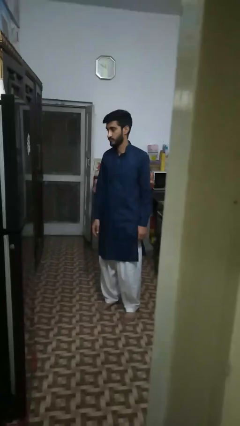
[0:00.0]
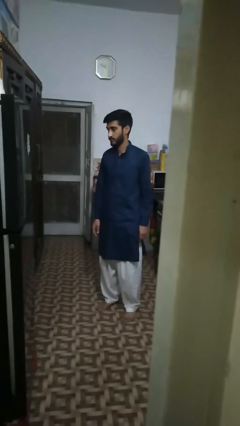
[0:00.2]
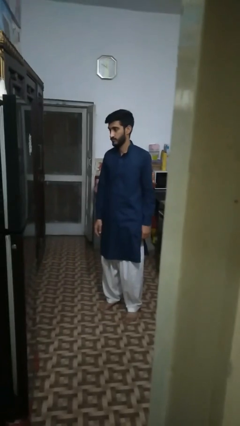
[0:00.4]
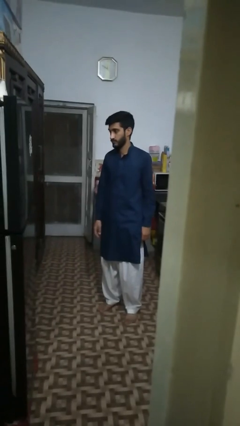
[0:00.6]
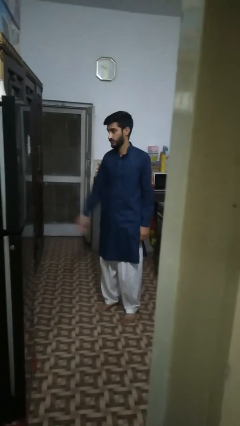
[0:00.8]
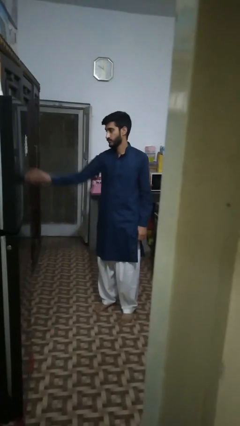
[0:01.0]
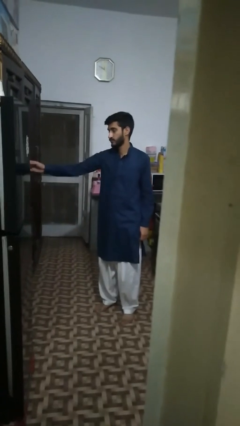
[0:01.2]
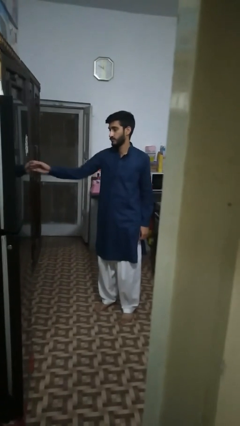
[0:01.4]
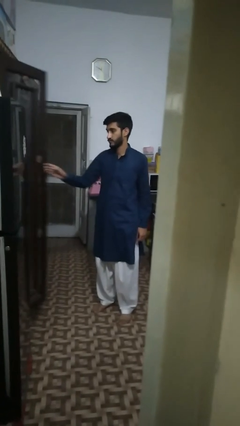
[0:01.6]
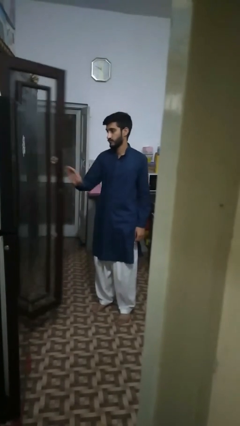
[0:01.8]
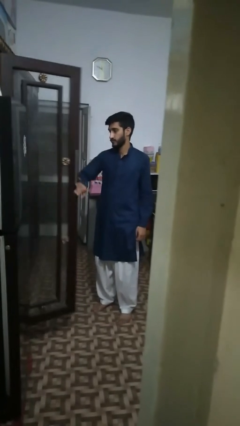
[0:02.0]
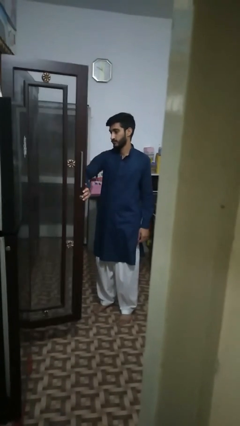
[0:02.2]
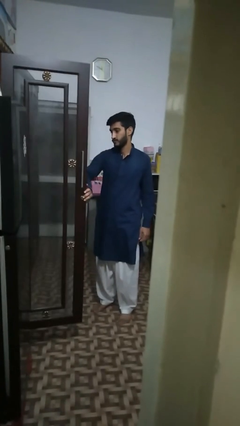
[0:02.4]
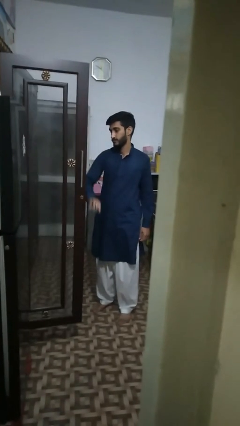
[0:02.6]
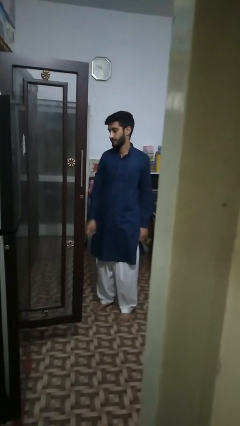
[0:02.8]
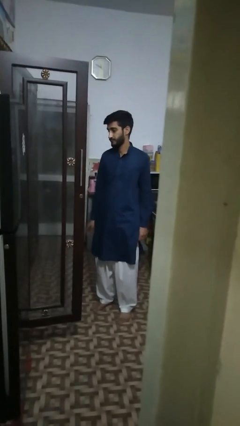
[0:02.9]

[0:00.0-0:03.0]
person opens cabinet

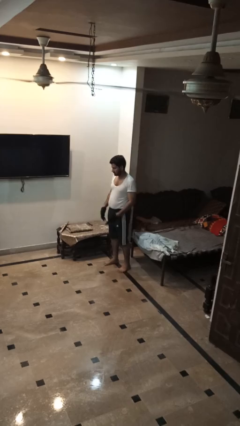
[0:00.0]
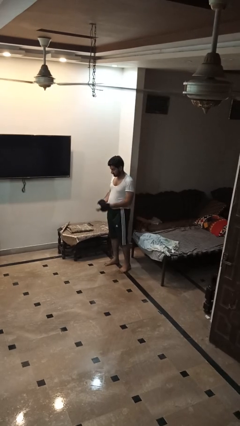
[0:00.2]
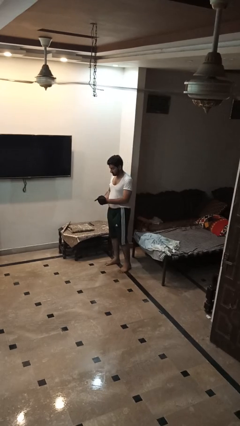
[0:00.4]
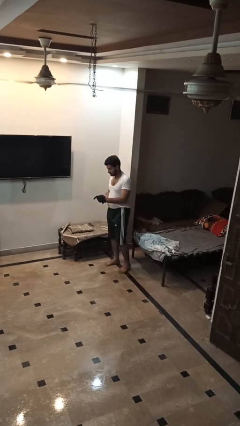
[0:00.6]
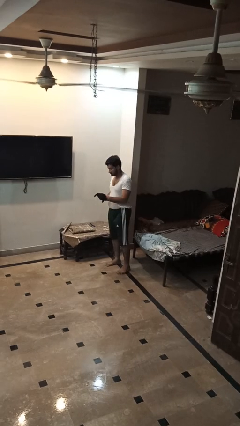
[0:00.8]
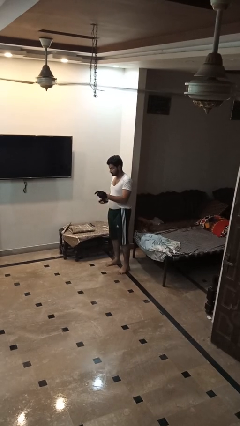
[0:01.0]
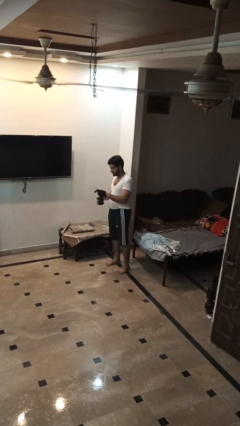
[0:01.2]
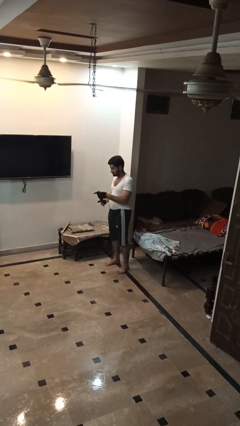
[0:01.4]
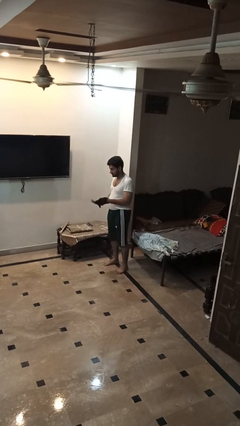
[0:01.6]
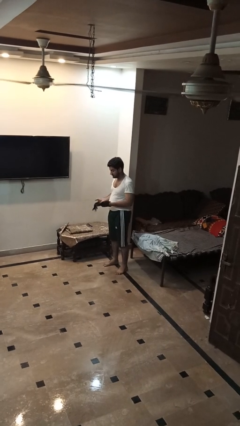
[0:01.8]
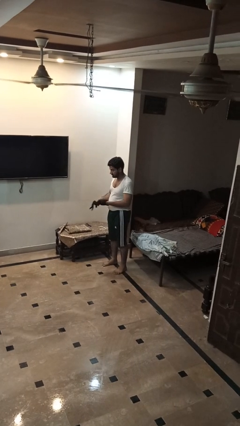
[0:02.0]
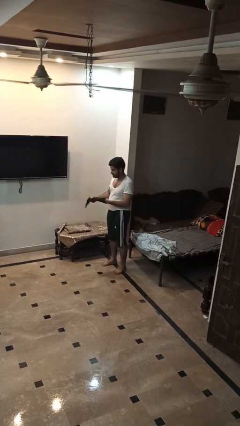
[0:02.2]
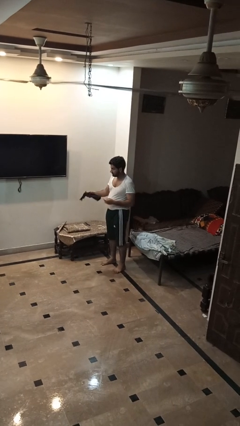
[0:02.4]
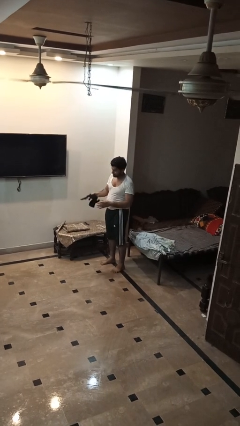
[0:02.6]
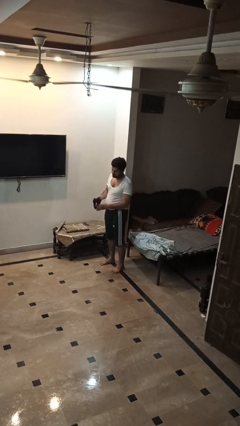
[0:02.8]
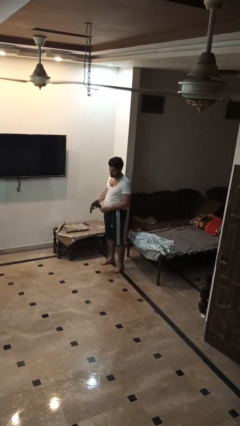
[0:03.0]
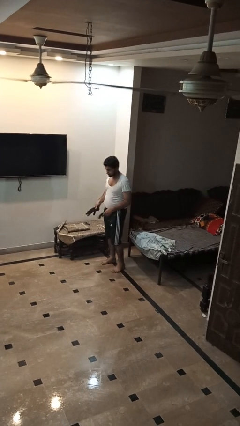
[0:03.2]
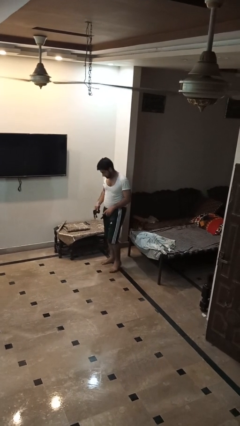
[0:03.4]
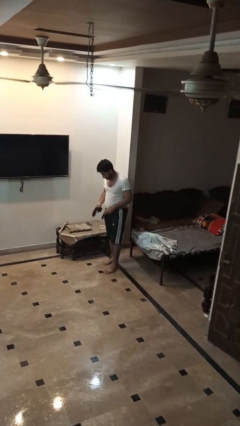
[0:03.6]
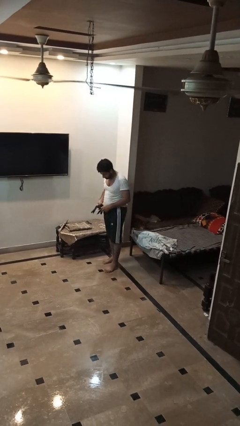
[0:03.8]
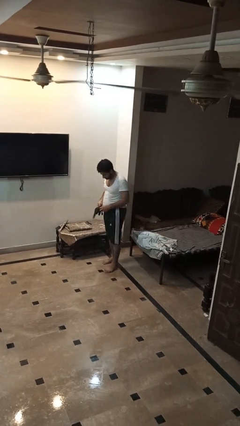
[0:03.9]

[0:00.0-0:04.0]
person takes off gloves

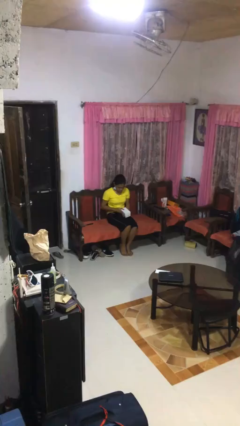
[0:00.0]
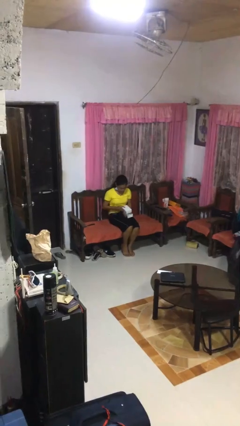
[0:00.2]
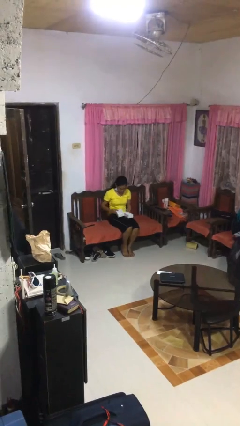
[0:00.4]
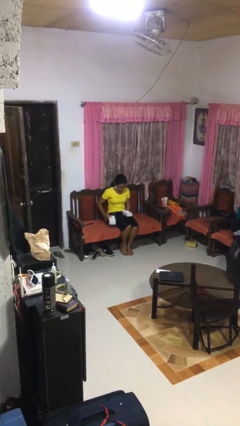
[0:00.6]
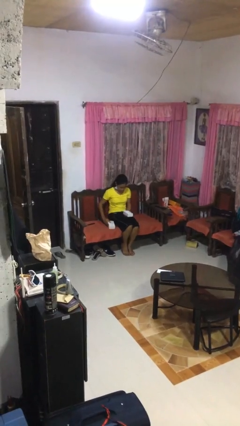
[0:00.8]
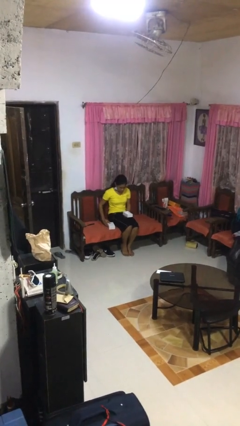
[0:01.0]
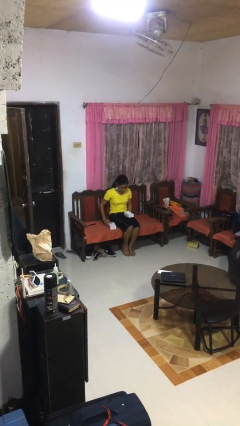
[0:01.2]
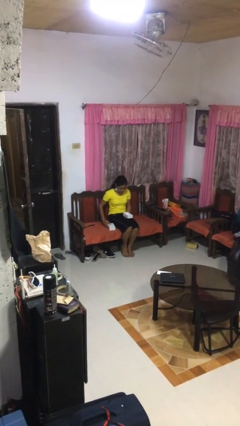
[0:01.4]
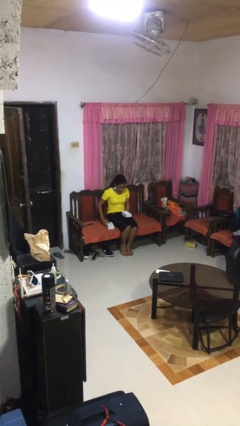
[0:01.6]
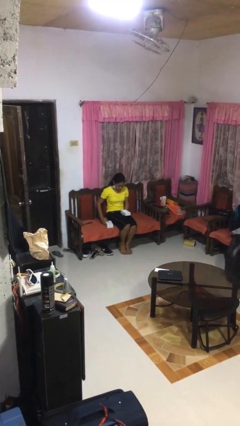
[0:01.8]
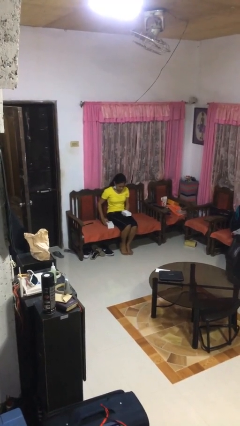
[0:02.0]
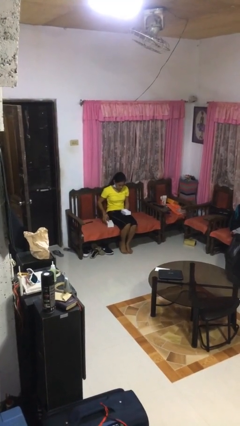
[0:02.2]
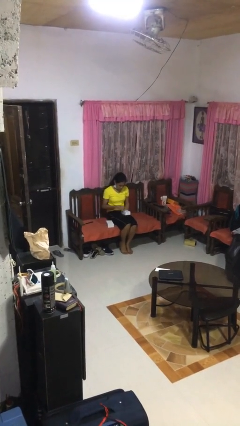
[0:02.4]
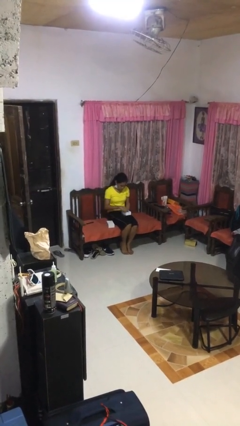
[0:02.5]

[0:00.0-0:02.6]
person opens jewelry box

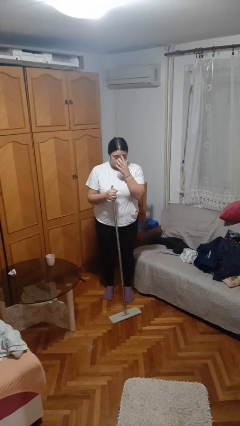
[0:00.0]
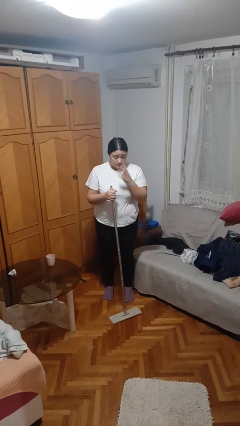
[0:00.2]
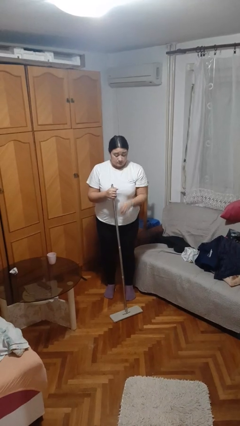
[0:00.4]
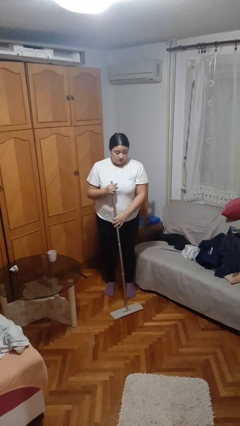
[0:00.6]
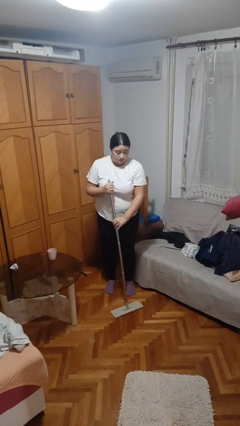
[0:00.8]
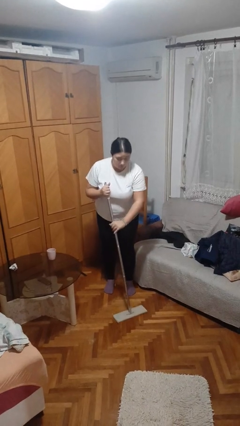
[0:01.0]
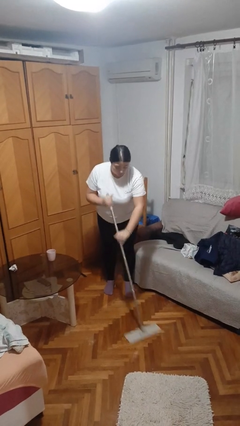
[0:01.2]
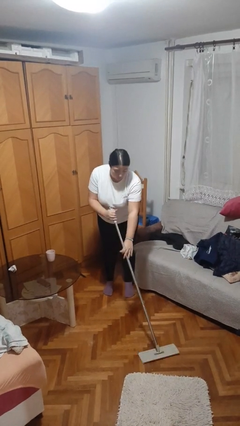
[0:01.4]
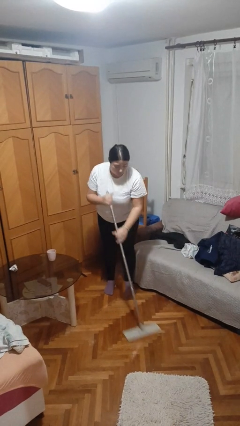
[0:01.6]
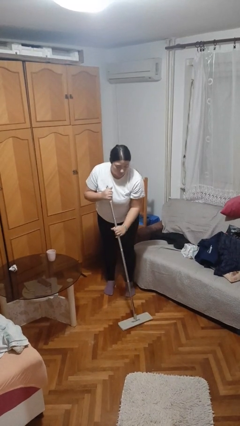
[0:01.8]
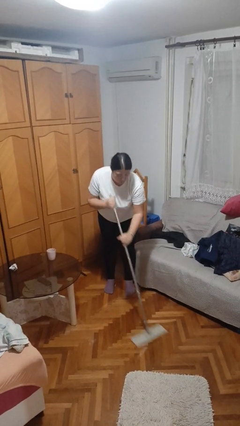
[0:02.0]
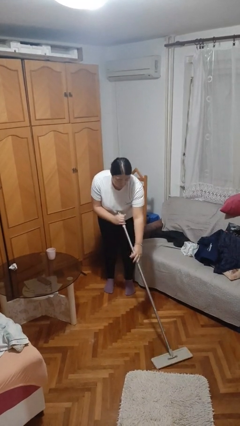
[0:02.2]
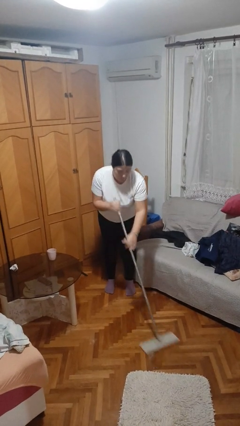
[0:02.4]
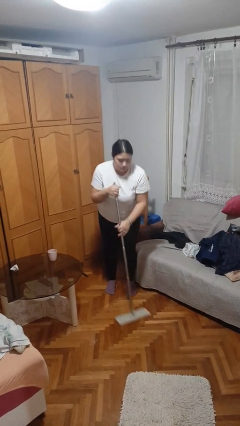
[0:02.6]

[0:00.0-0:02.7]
person mops

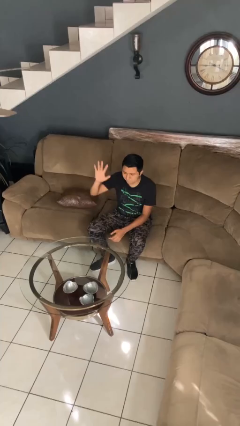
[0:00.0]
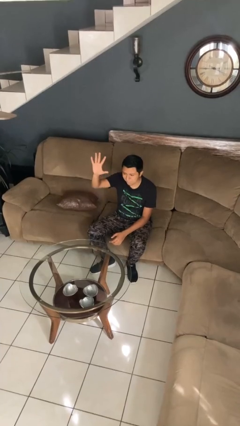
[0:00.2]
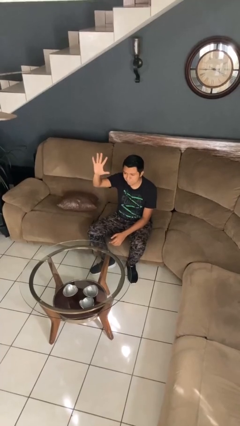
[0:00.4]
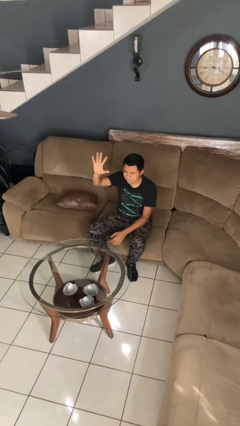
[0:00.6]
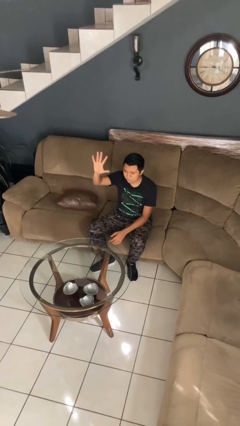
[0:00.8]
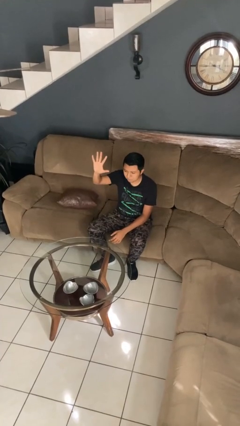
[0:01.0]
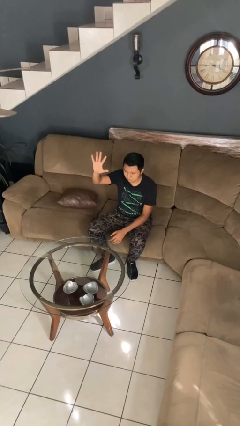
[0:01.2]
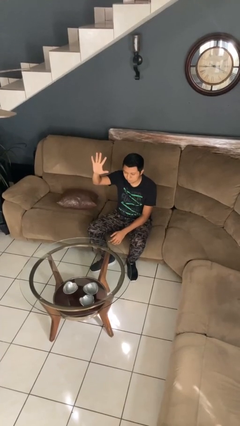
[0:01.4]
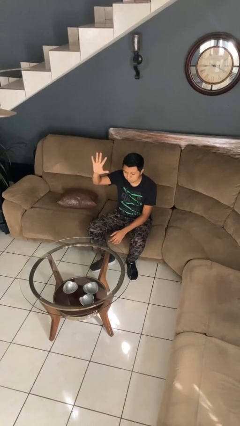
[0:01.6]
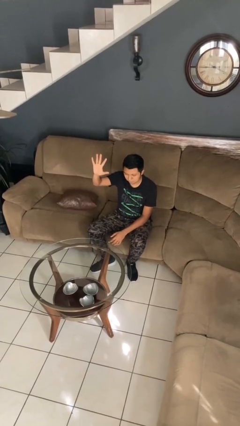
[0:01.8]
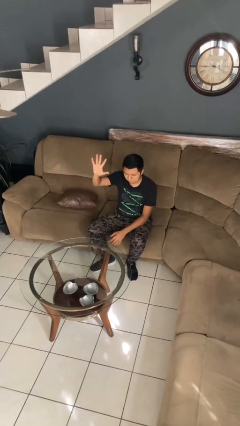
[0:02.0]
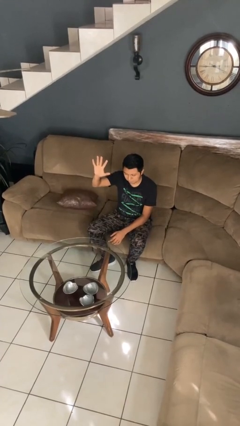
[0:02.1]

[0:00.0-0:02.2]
person gestures number five

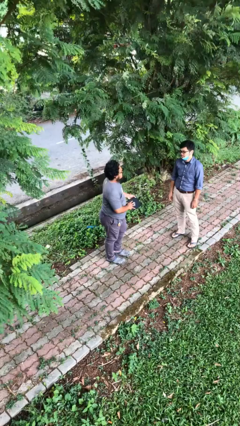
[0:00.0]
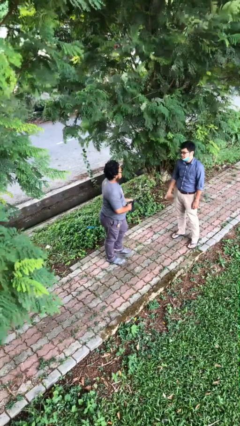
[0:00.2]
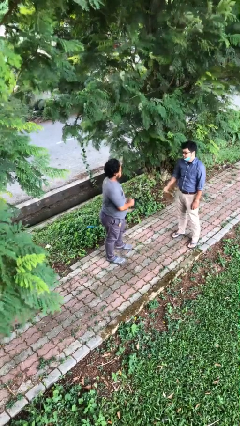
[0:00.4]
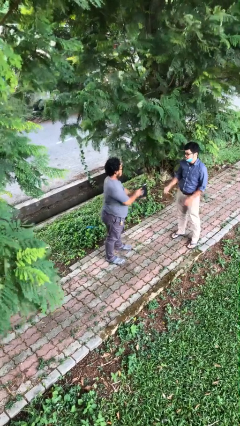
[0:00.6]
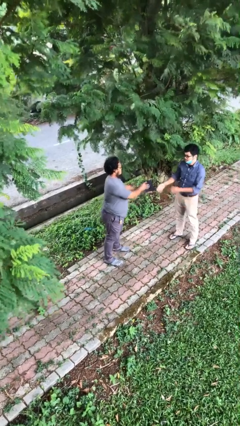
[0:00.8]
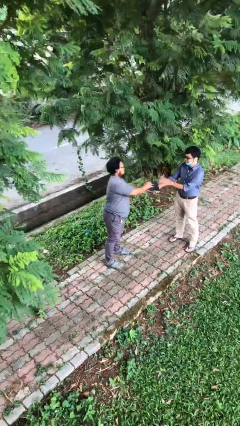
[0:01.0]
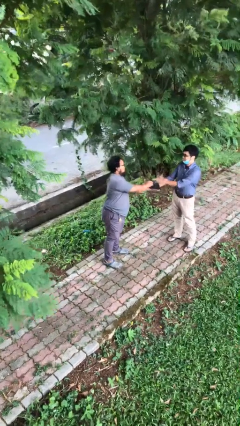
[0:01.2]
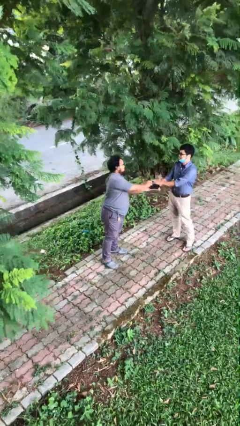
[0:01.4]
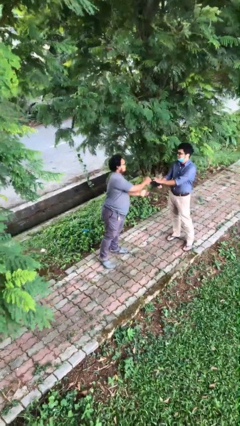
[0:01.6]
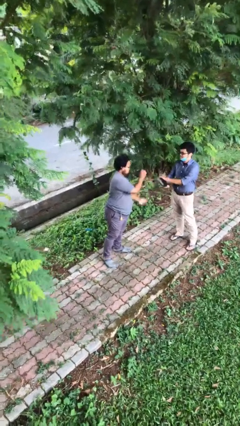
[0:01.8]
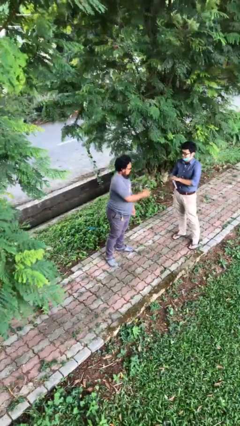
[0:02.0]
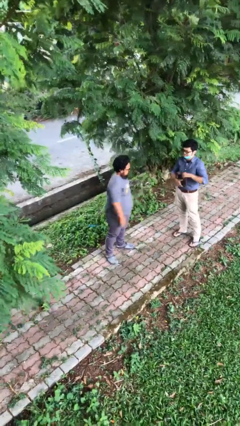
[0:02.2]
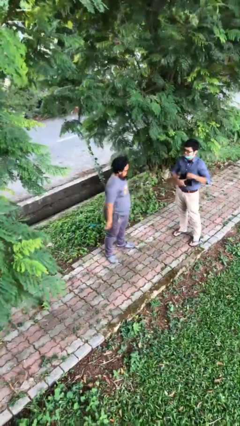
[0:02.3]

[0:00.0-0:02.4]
person transfers object to person

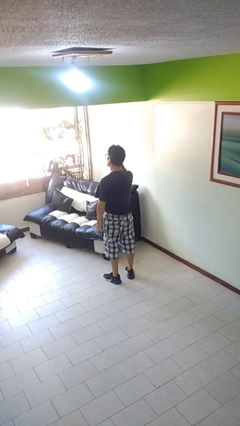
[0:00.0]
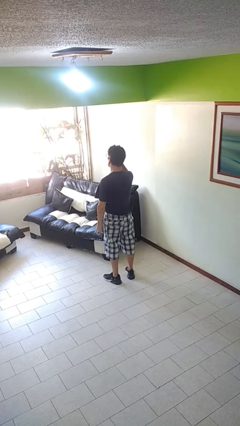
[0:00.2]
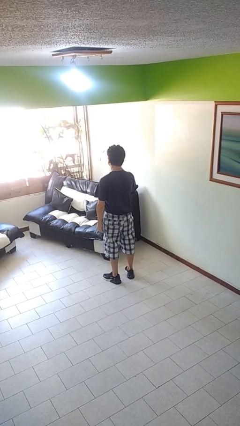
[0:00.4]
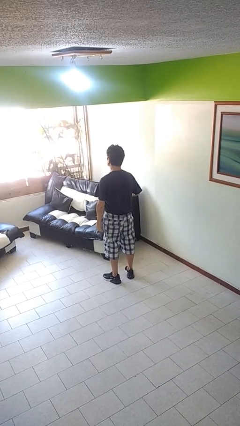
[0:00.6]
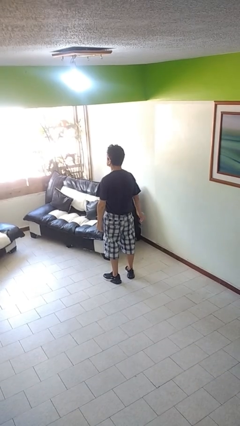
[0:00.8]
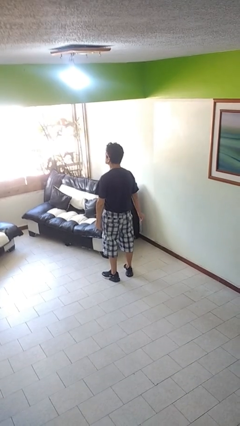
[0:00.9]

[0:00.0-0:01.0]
person takes off glasses
